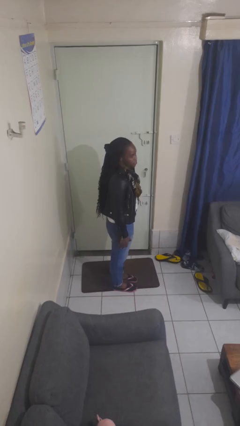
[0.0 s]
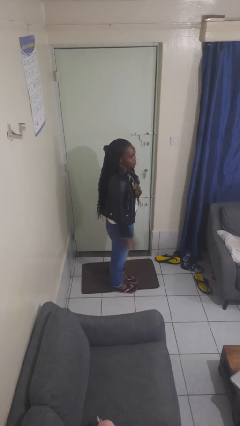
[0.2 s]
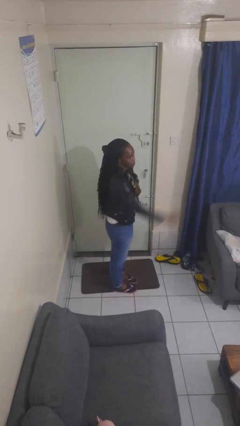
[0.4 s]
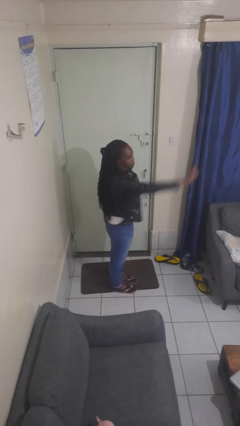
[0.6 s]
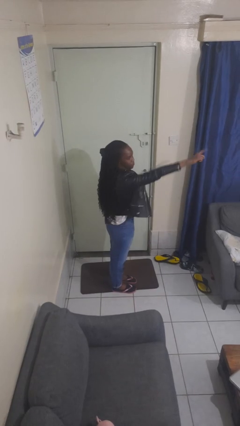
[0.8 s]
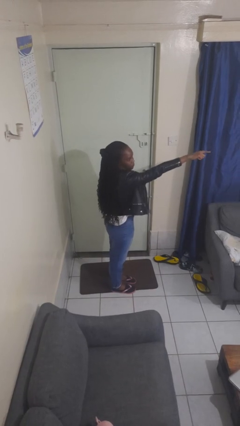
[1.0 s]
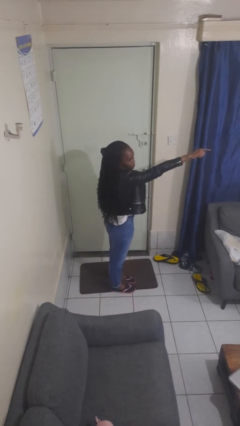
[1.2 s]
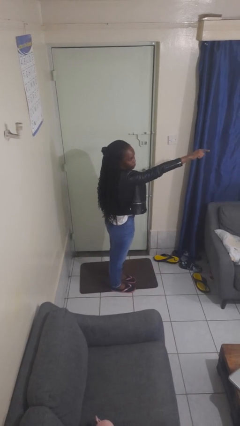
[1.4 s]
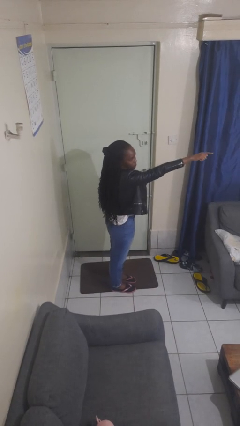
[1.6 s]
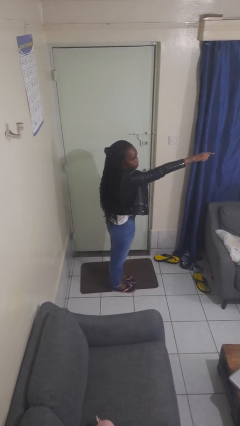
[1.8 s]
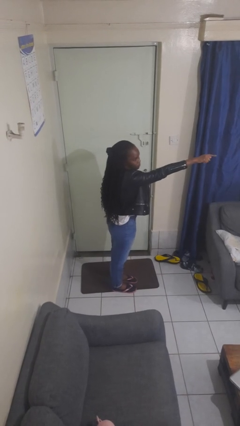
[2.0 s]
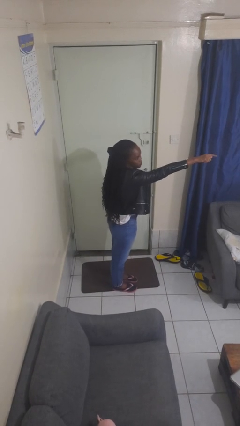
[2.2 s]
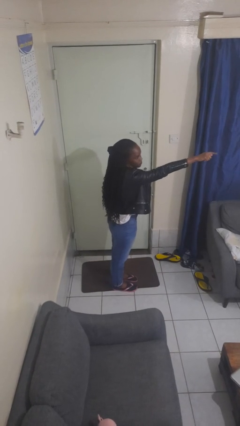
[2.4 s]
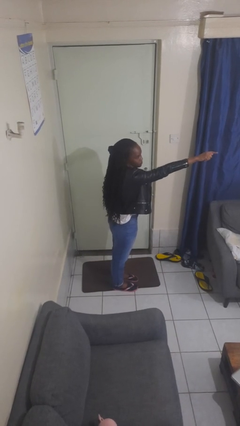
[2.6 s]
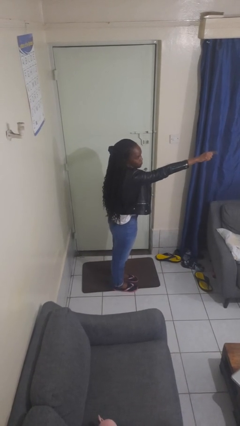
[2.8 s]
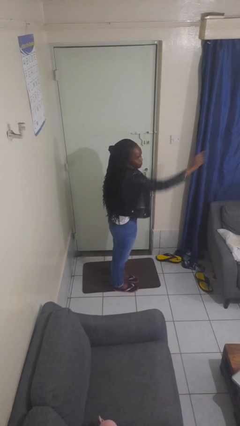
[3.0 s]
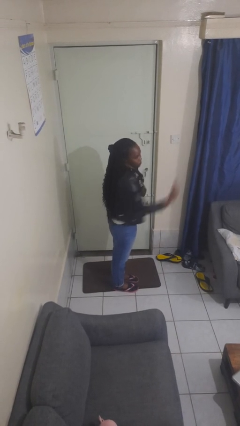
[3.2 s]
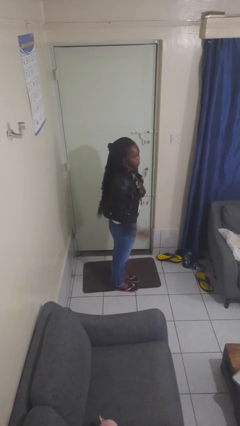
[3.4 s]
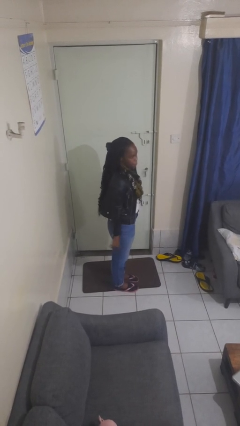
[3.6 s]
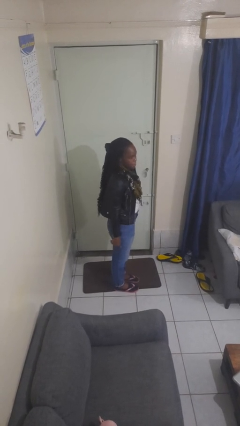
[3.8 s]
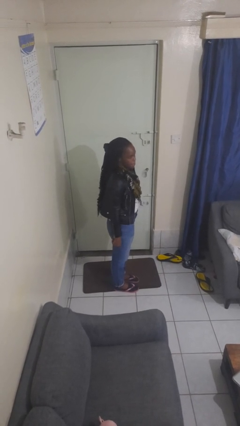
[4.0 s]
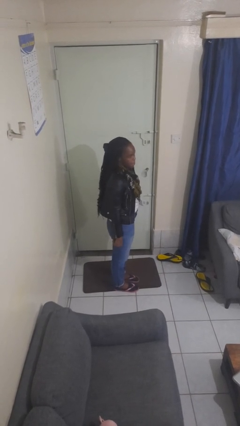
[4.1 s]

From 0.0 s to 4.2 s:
person points at person

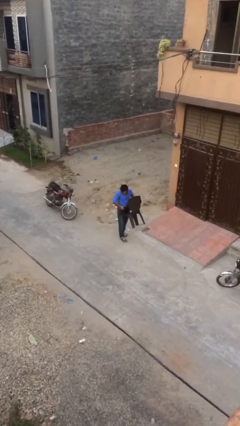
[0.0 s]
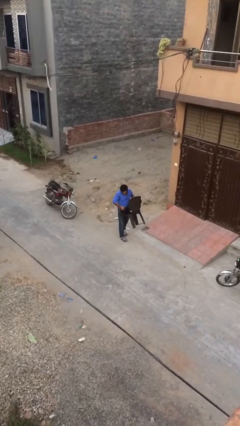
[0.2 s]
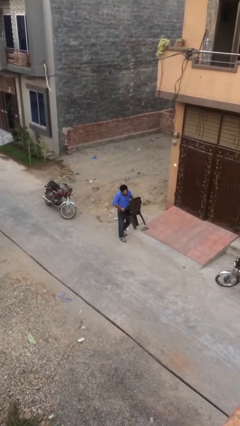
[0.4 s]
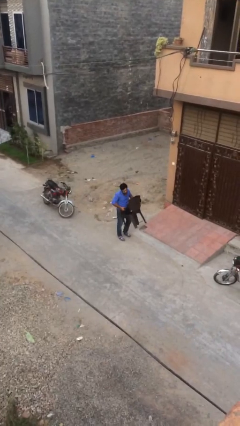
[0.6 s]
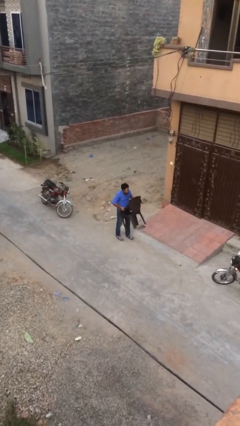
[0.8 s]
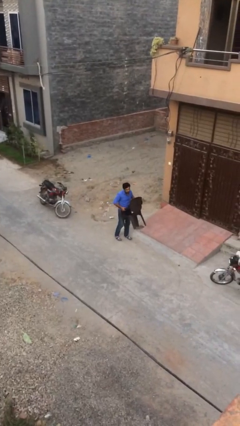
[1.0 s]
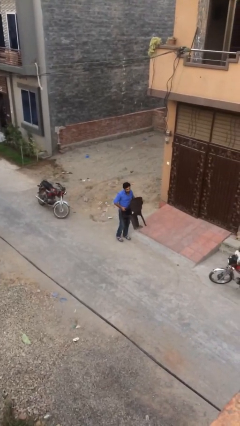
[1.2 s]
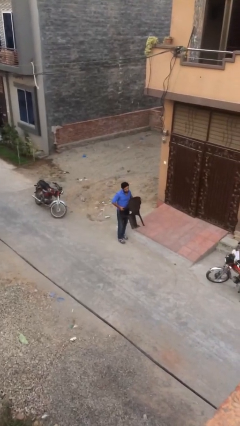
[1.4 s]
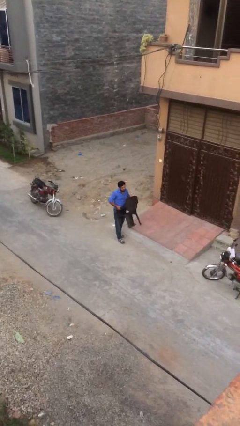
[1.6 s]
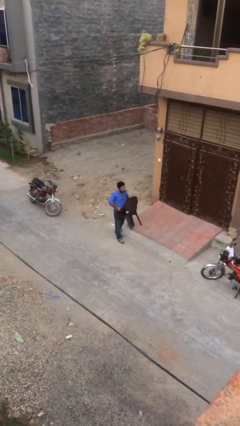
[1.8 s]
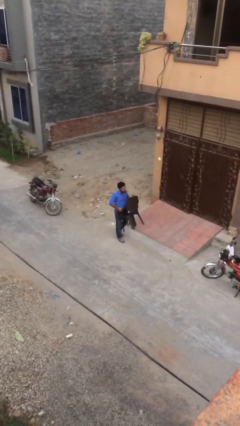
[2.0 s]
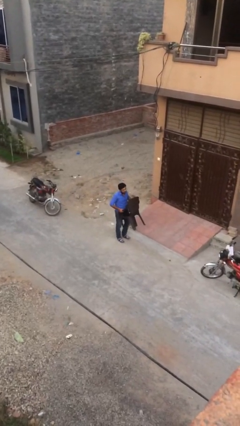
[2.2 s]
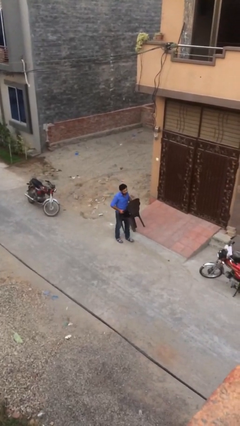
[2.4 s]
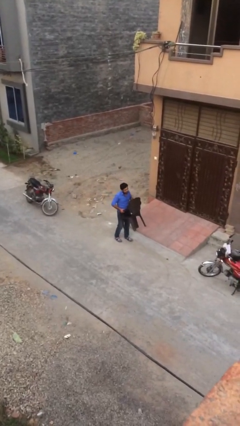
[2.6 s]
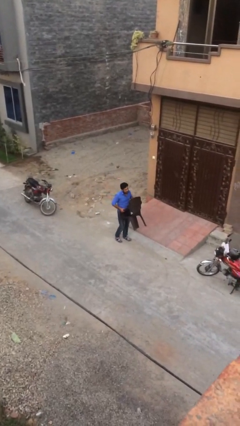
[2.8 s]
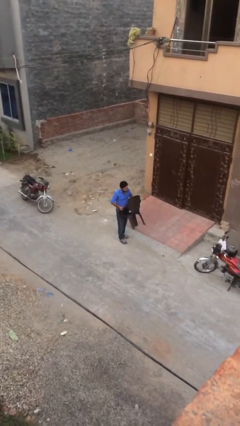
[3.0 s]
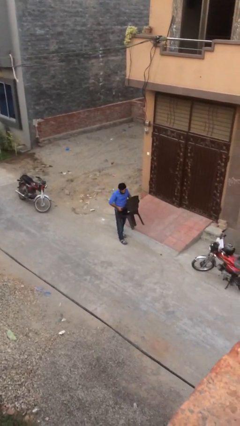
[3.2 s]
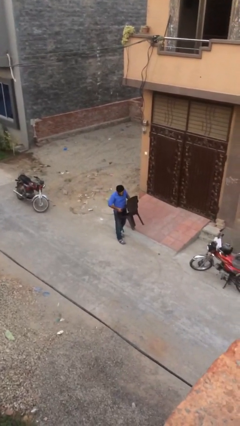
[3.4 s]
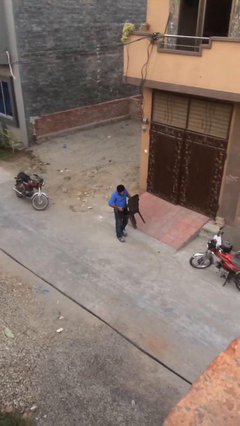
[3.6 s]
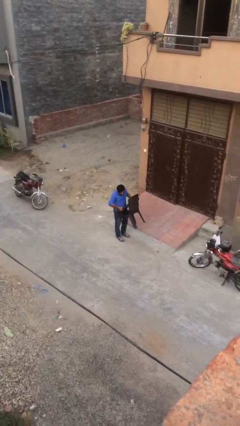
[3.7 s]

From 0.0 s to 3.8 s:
person carries heavy object

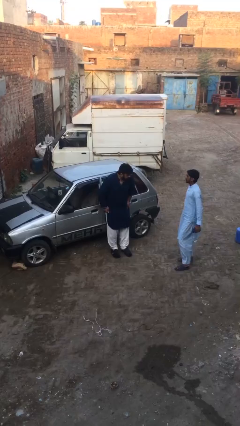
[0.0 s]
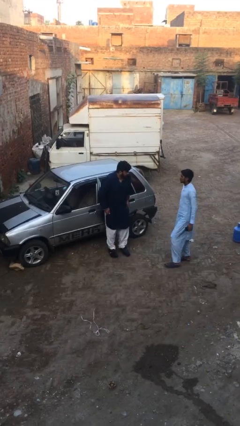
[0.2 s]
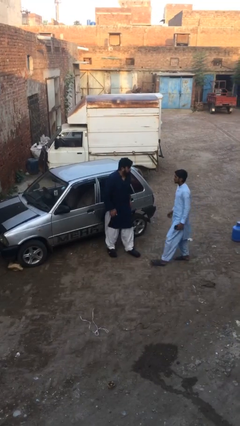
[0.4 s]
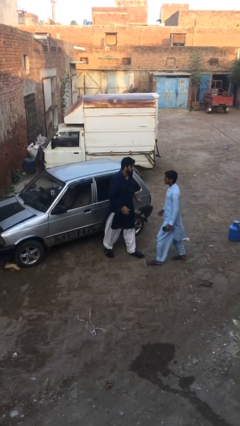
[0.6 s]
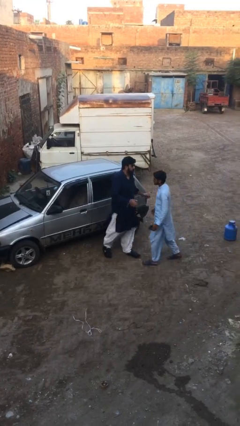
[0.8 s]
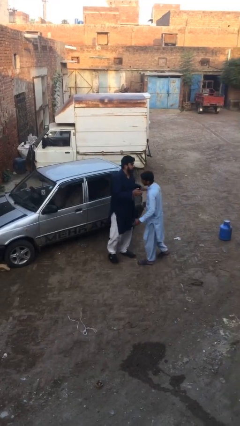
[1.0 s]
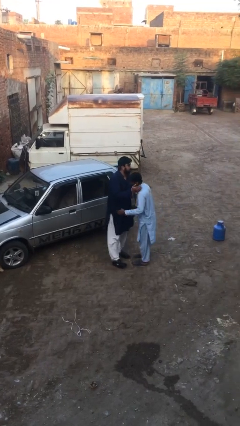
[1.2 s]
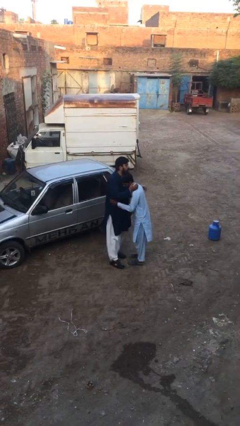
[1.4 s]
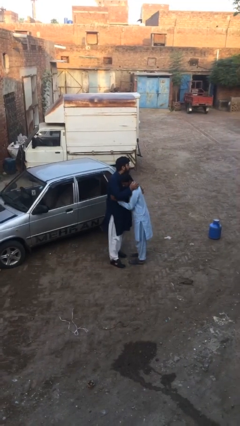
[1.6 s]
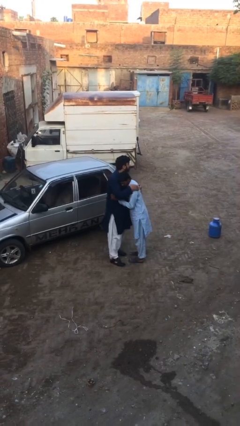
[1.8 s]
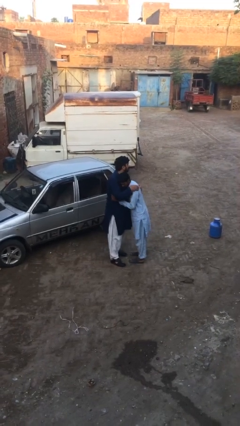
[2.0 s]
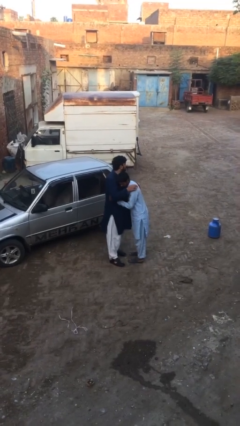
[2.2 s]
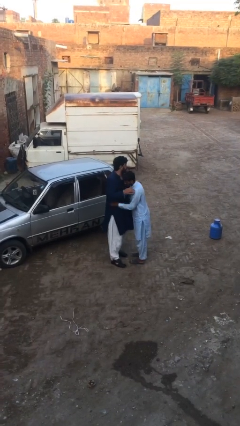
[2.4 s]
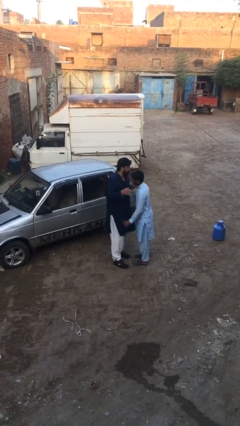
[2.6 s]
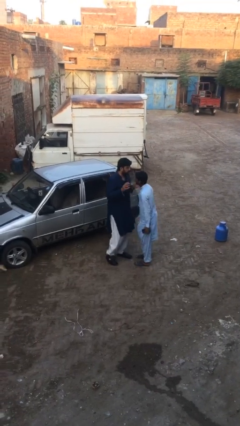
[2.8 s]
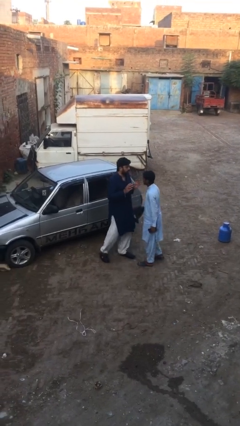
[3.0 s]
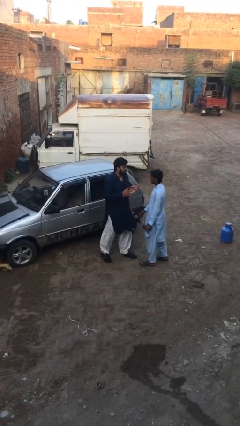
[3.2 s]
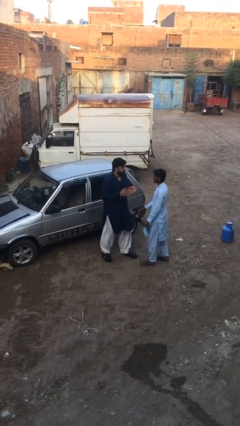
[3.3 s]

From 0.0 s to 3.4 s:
person embraces person

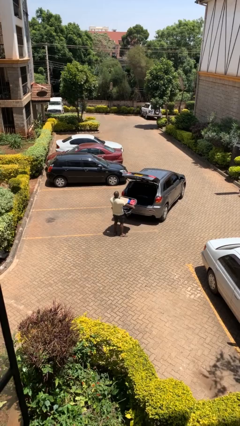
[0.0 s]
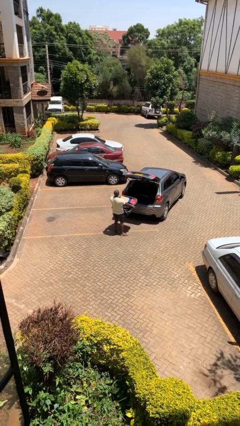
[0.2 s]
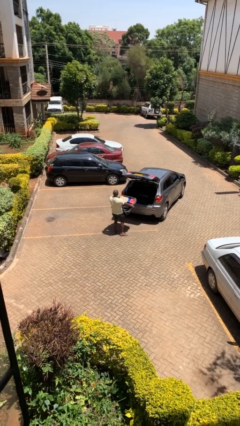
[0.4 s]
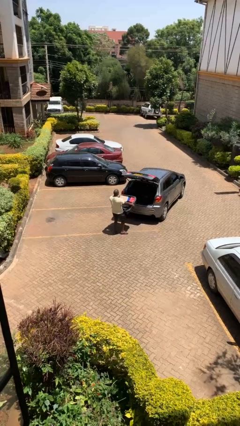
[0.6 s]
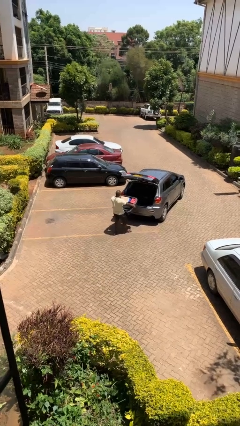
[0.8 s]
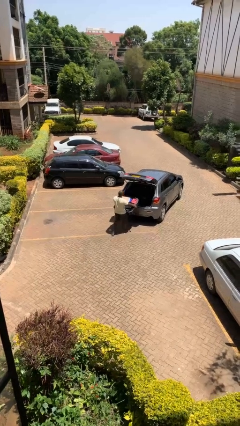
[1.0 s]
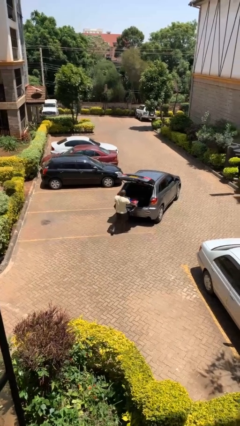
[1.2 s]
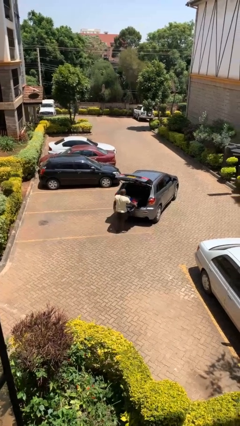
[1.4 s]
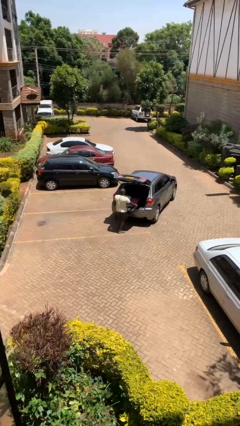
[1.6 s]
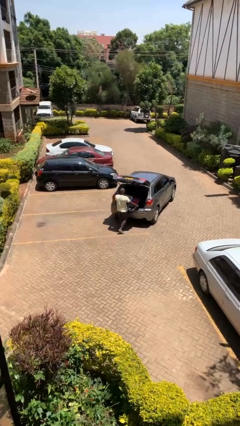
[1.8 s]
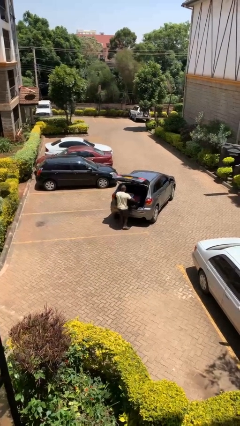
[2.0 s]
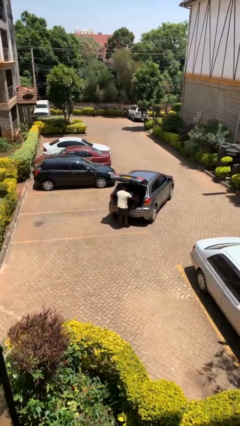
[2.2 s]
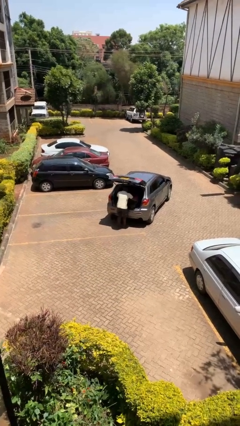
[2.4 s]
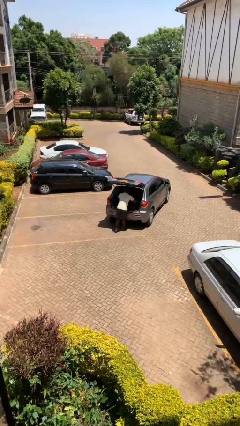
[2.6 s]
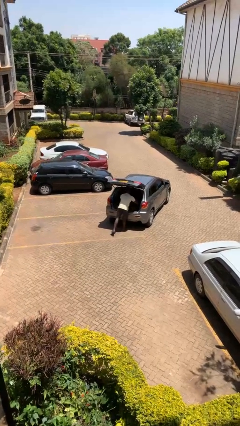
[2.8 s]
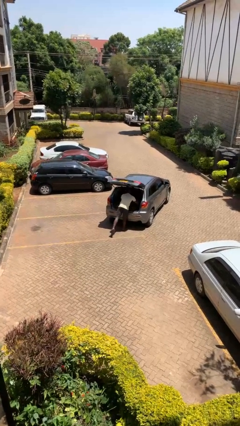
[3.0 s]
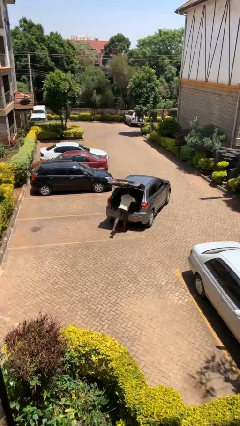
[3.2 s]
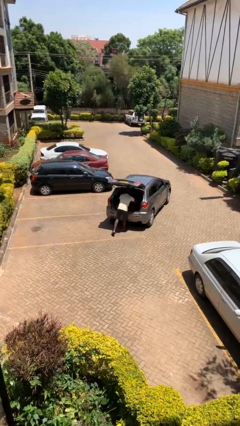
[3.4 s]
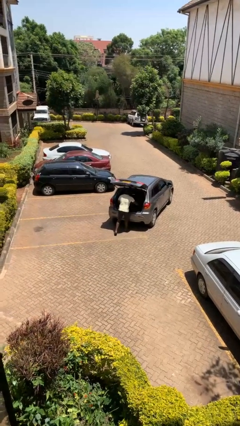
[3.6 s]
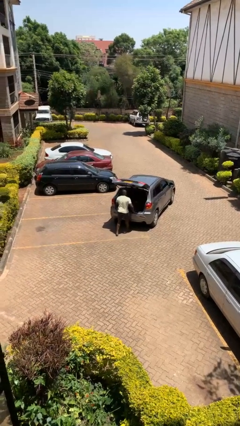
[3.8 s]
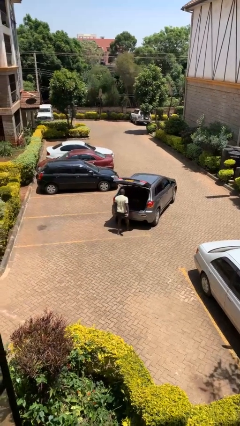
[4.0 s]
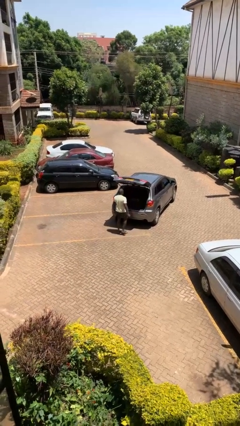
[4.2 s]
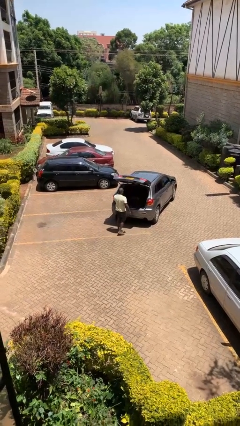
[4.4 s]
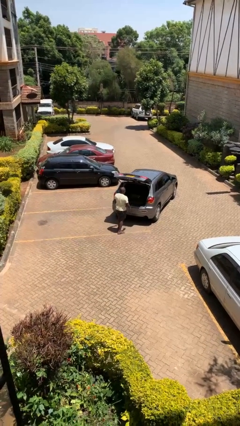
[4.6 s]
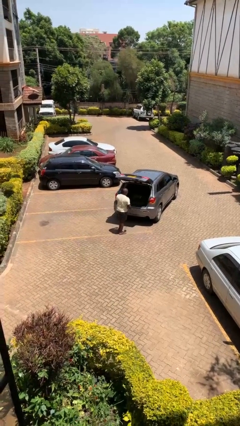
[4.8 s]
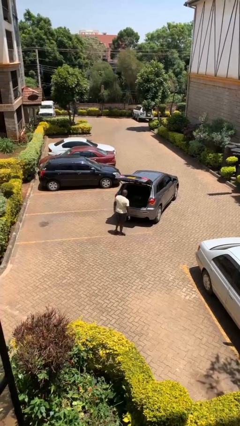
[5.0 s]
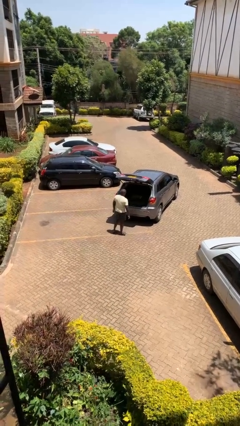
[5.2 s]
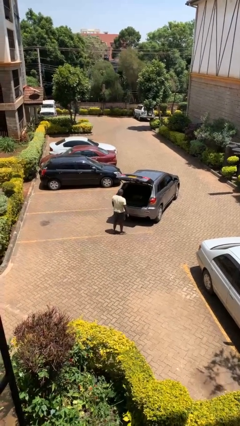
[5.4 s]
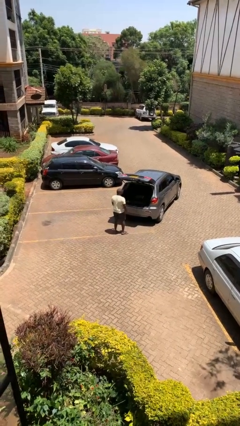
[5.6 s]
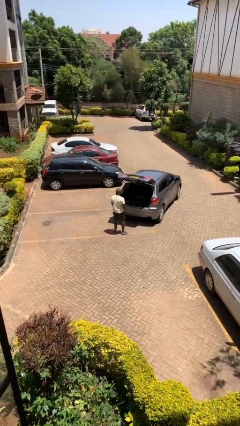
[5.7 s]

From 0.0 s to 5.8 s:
person loads car
